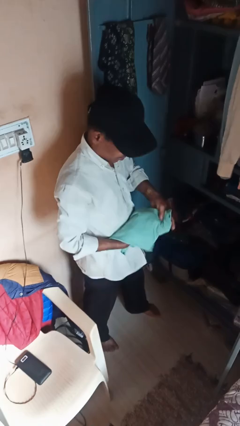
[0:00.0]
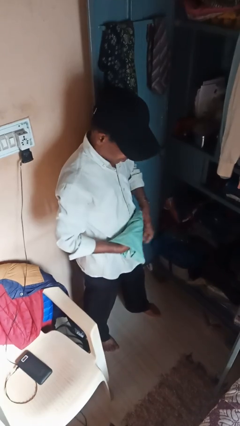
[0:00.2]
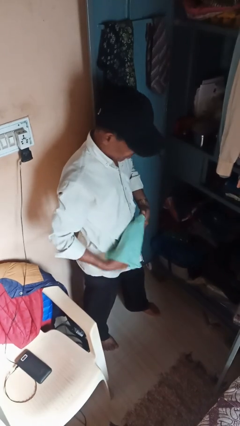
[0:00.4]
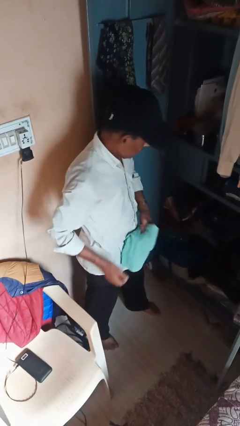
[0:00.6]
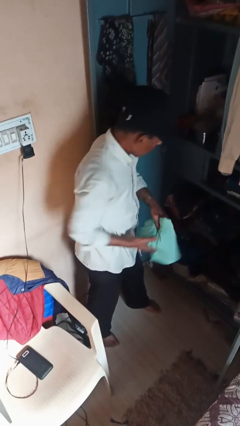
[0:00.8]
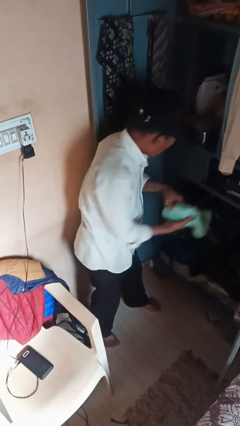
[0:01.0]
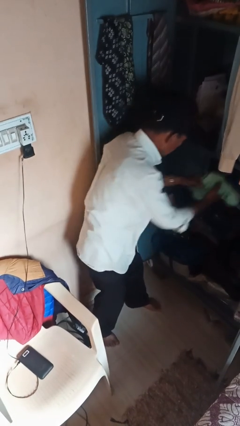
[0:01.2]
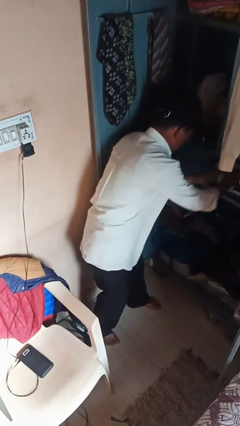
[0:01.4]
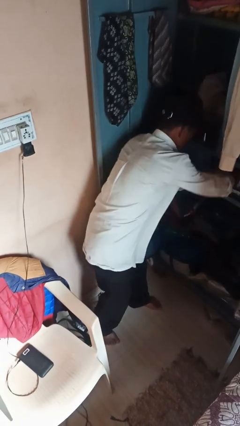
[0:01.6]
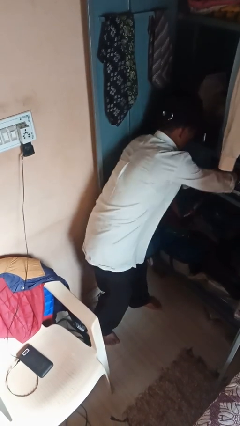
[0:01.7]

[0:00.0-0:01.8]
person puts clothes into dresser

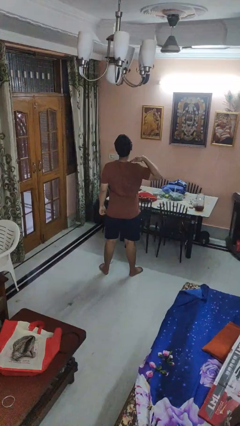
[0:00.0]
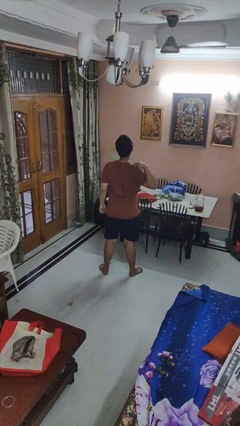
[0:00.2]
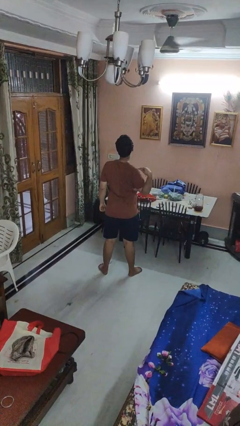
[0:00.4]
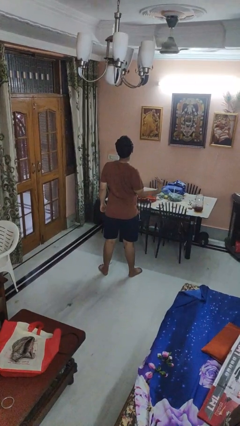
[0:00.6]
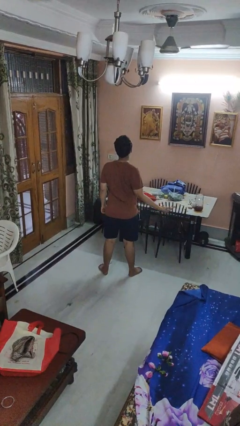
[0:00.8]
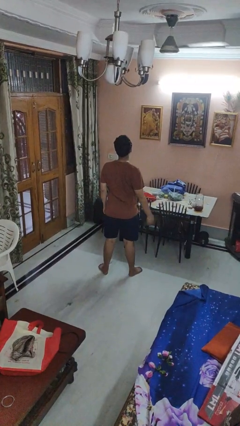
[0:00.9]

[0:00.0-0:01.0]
person gestures cut

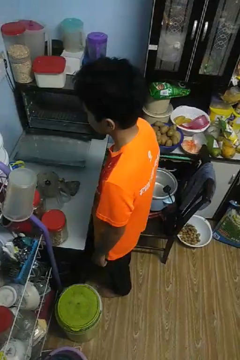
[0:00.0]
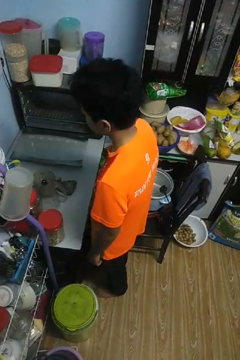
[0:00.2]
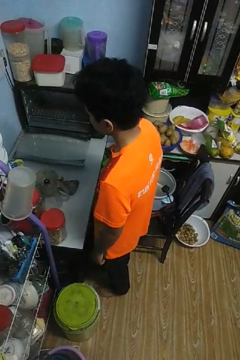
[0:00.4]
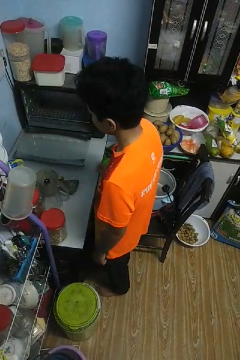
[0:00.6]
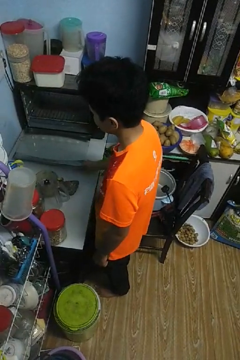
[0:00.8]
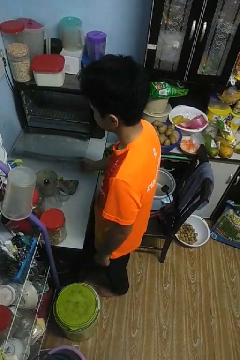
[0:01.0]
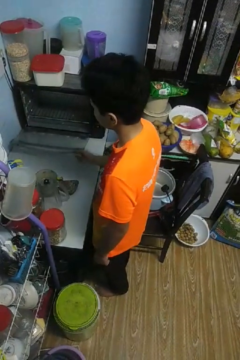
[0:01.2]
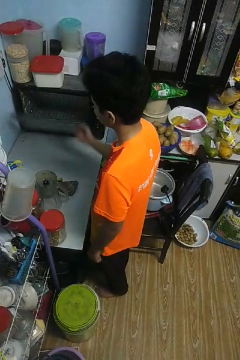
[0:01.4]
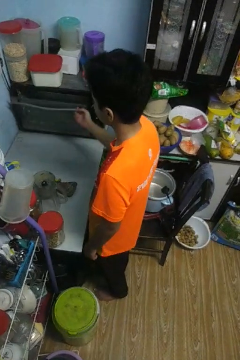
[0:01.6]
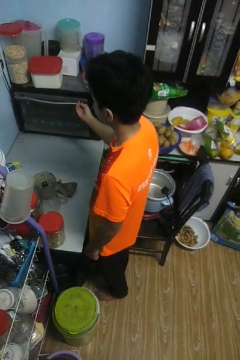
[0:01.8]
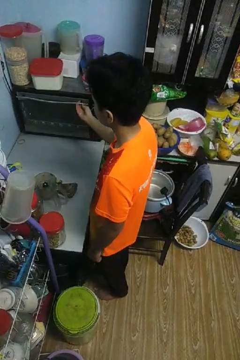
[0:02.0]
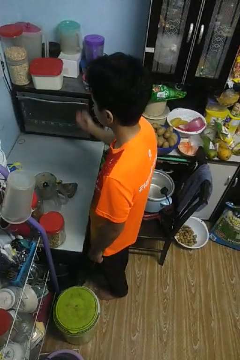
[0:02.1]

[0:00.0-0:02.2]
person closes oven door

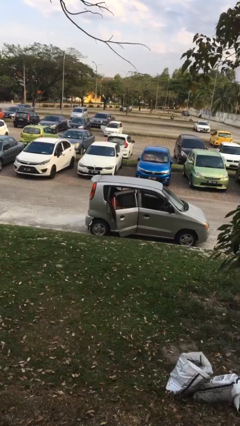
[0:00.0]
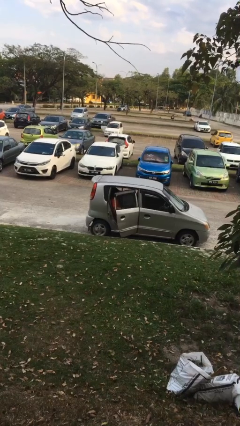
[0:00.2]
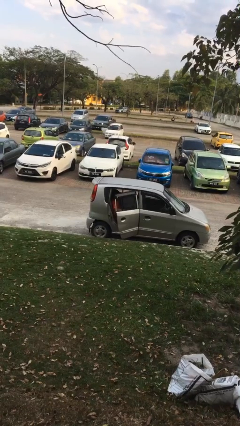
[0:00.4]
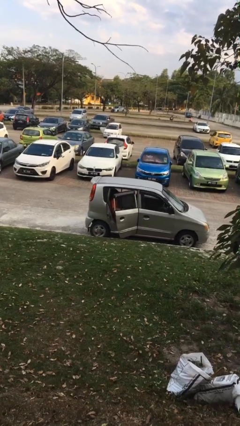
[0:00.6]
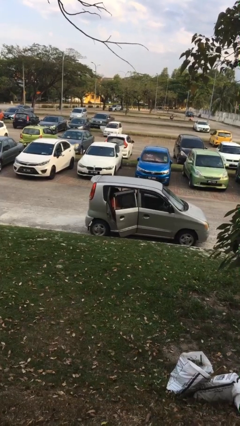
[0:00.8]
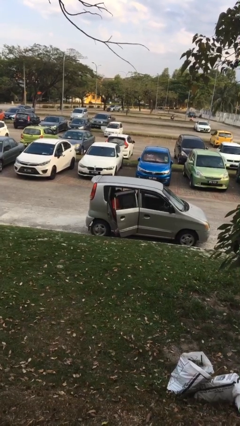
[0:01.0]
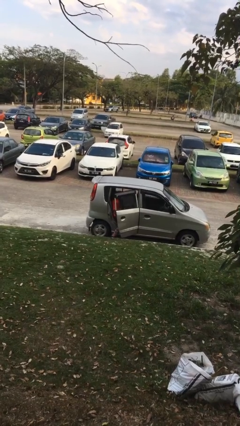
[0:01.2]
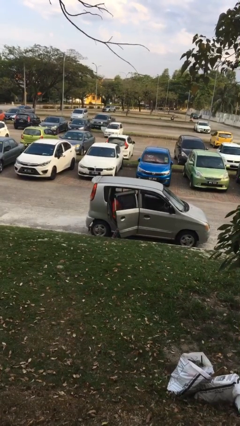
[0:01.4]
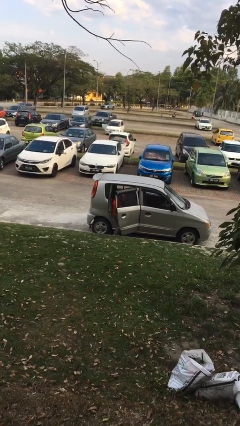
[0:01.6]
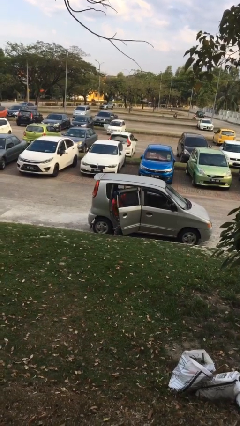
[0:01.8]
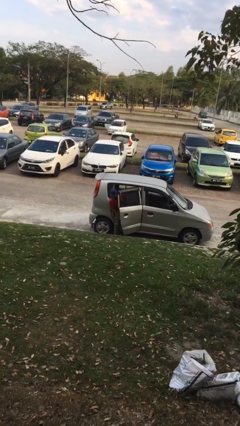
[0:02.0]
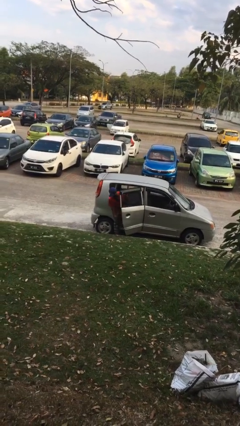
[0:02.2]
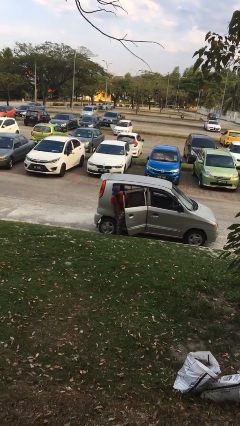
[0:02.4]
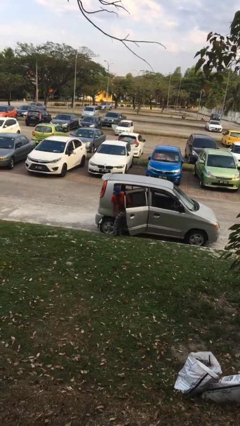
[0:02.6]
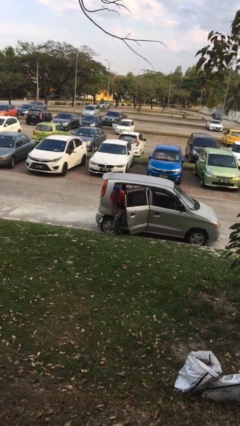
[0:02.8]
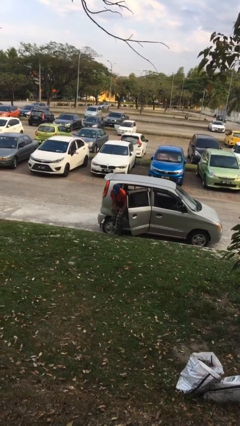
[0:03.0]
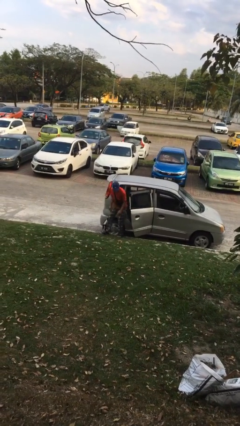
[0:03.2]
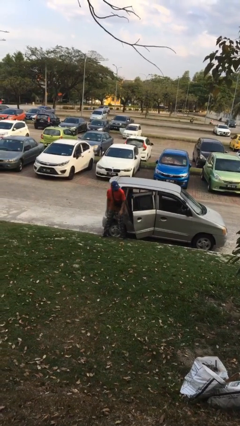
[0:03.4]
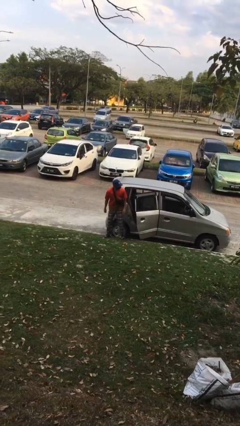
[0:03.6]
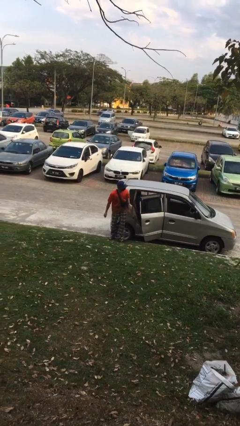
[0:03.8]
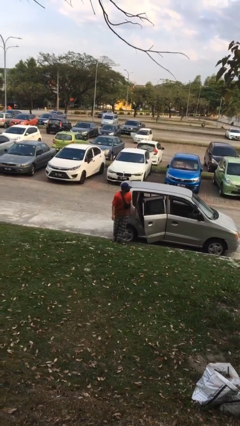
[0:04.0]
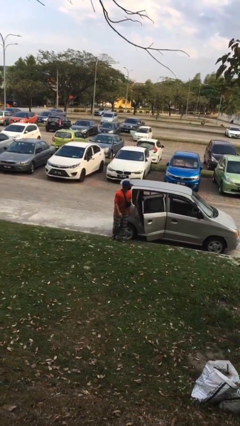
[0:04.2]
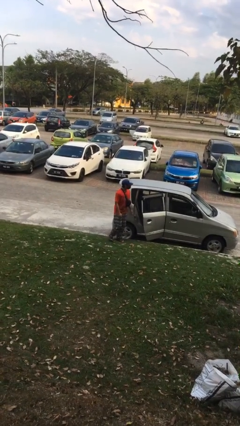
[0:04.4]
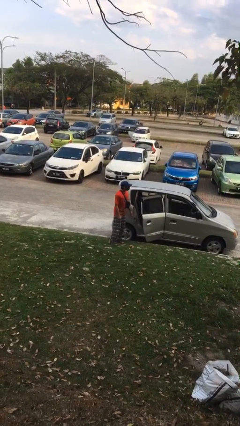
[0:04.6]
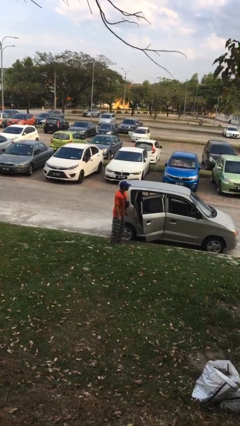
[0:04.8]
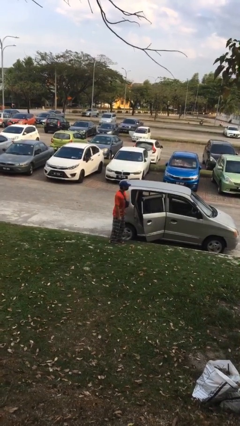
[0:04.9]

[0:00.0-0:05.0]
person exits car

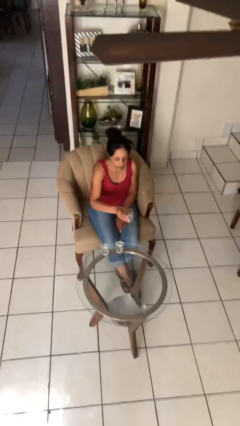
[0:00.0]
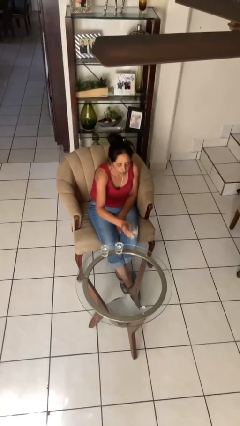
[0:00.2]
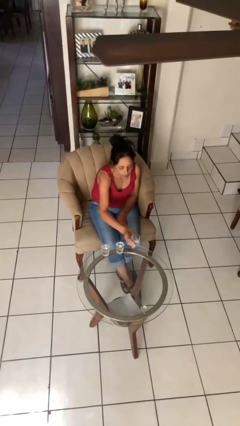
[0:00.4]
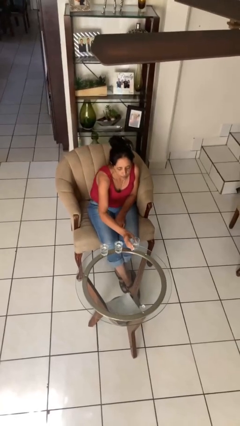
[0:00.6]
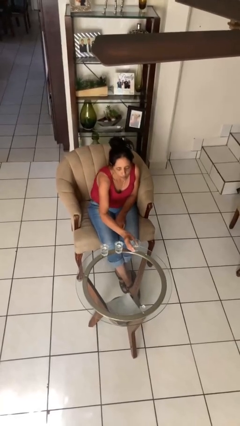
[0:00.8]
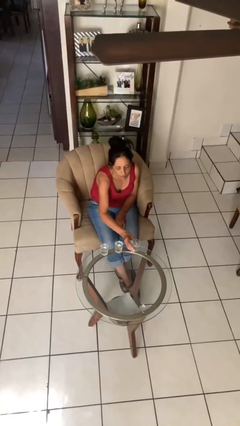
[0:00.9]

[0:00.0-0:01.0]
person puts down object on table

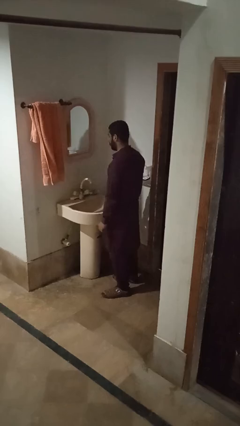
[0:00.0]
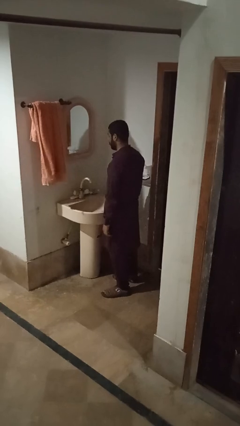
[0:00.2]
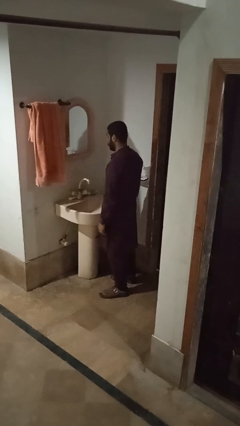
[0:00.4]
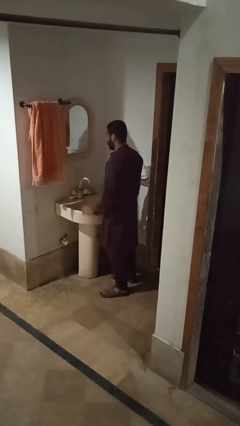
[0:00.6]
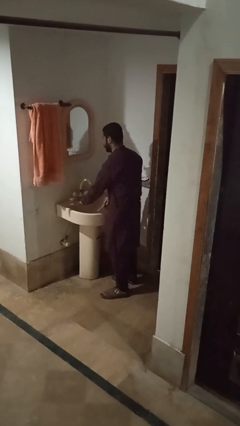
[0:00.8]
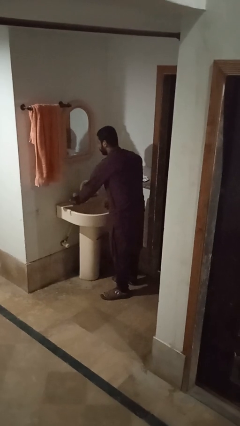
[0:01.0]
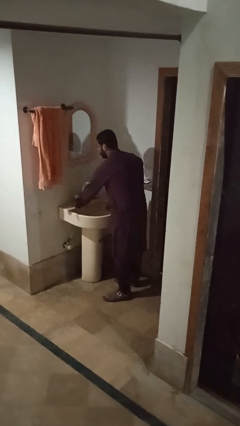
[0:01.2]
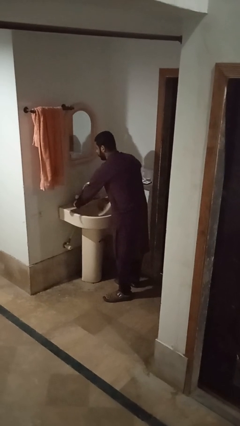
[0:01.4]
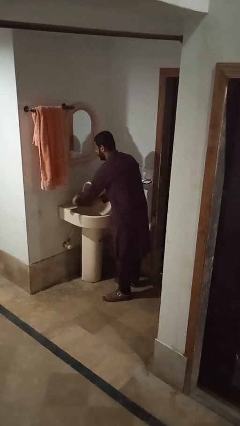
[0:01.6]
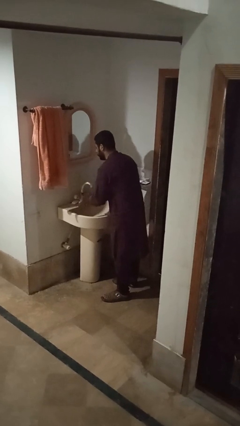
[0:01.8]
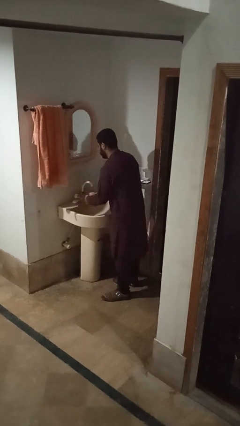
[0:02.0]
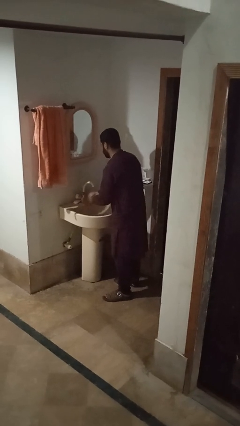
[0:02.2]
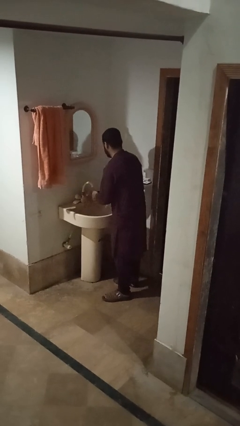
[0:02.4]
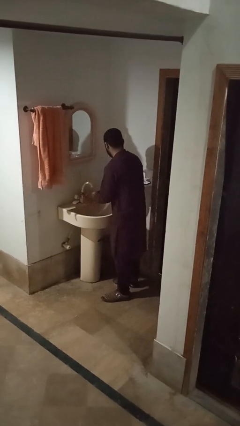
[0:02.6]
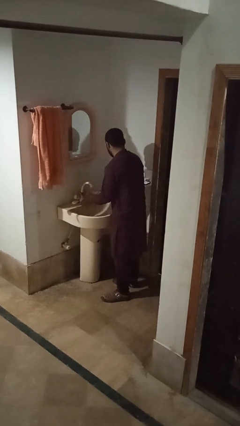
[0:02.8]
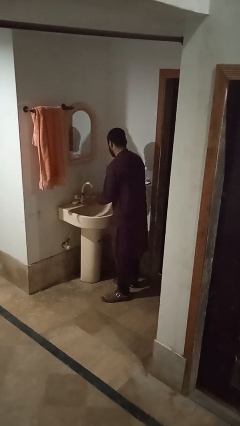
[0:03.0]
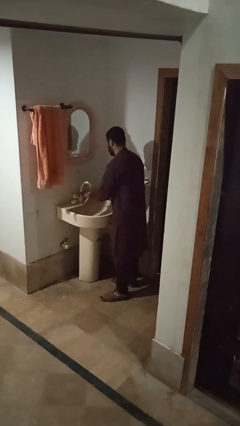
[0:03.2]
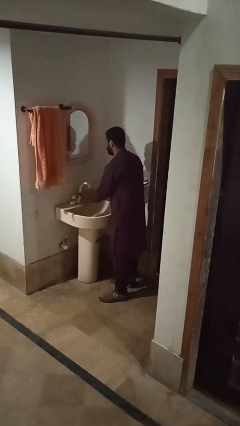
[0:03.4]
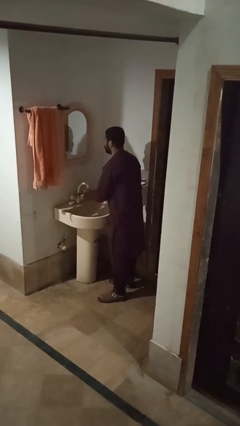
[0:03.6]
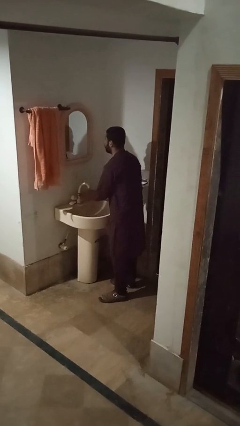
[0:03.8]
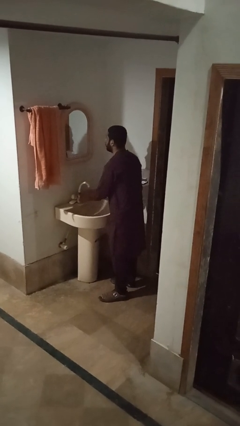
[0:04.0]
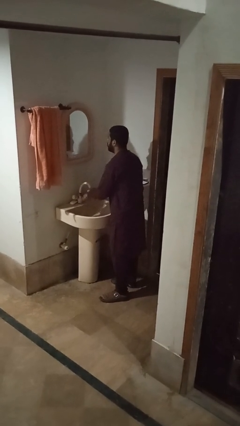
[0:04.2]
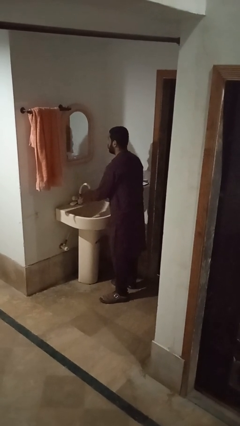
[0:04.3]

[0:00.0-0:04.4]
person washes hands

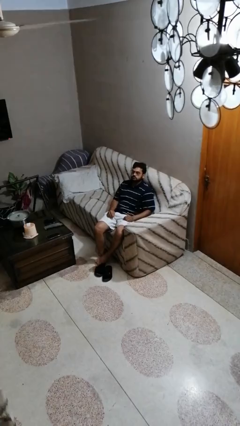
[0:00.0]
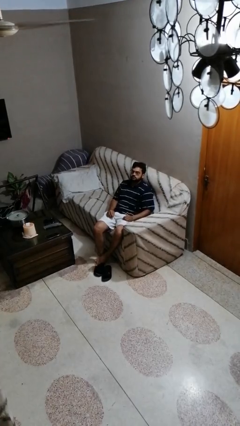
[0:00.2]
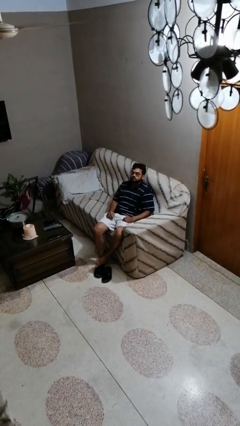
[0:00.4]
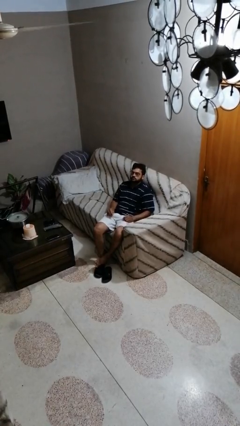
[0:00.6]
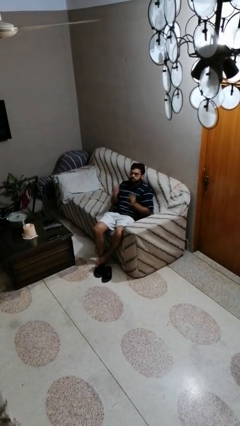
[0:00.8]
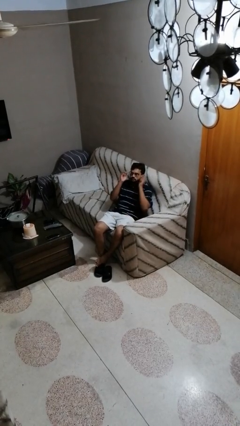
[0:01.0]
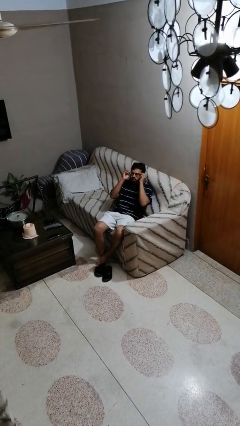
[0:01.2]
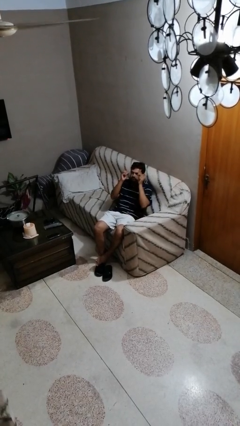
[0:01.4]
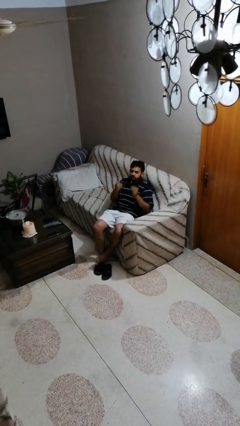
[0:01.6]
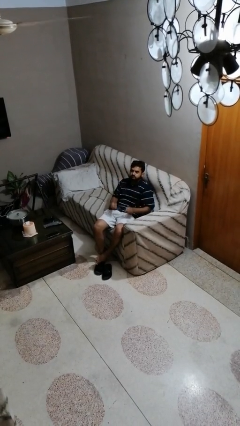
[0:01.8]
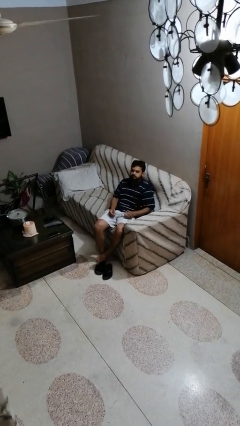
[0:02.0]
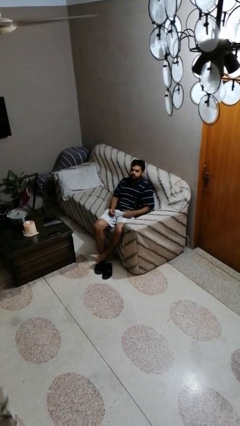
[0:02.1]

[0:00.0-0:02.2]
person takes off glasses
